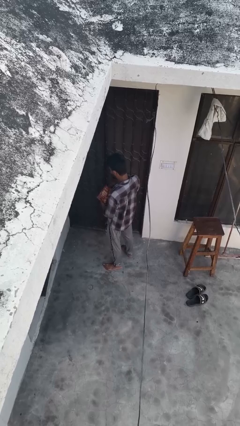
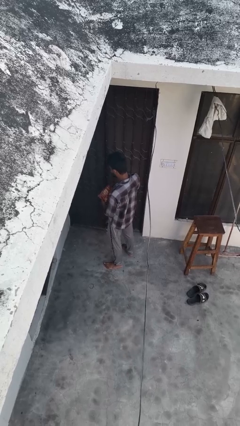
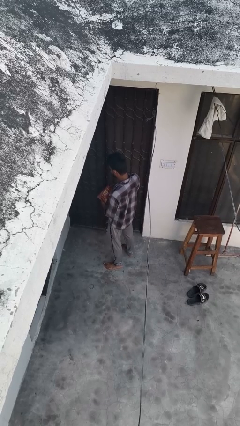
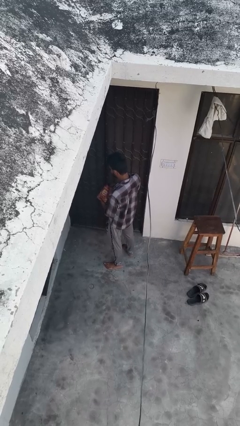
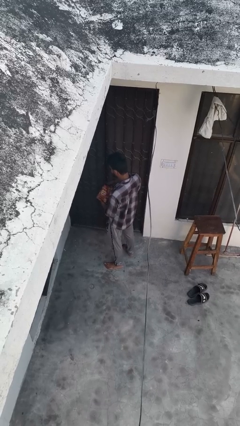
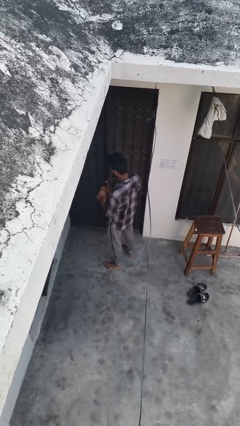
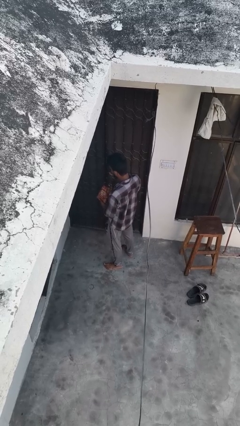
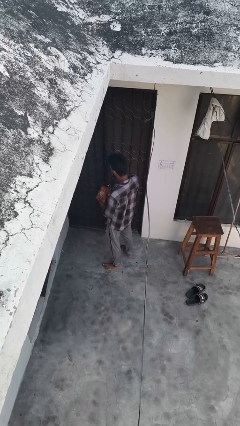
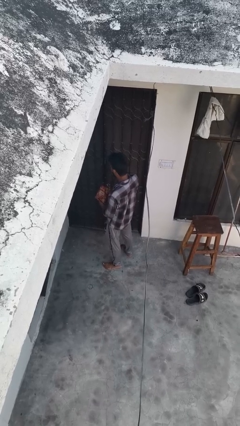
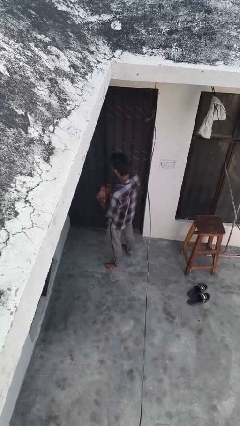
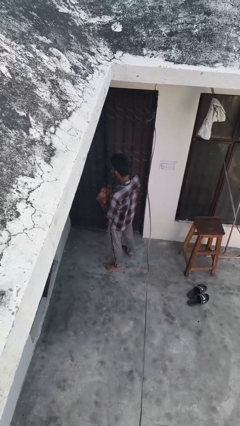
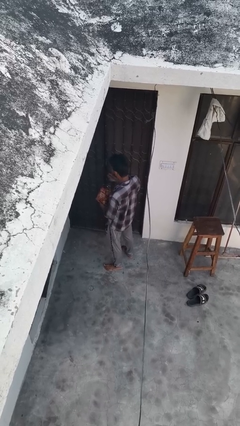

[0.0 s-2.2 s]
person eats snack from bag

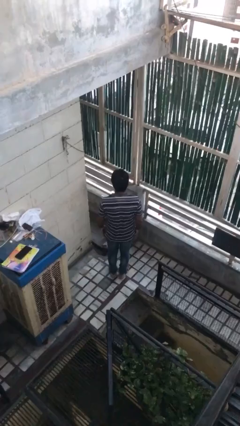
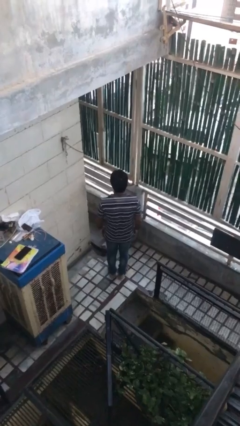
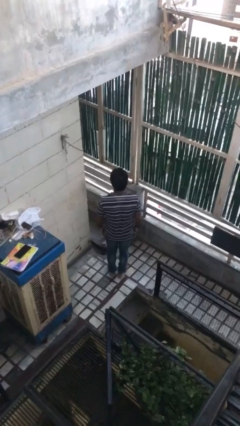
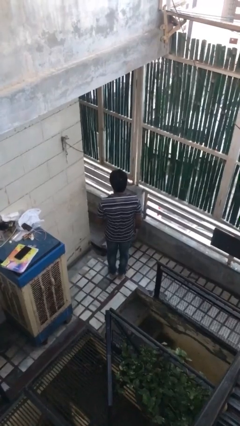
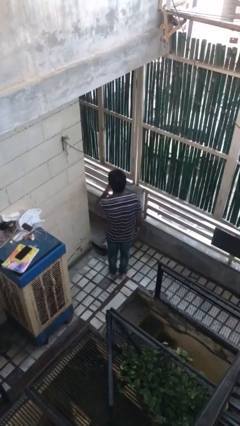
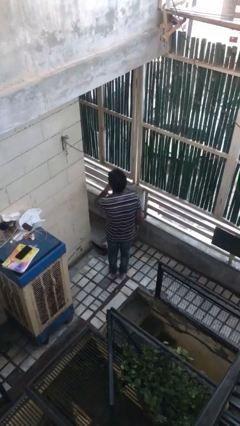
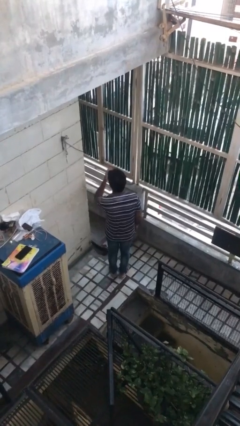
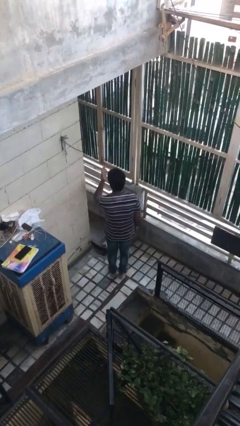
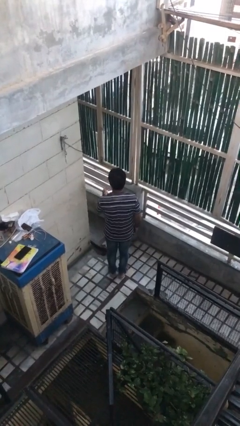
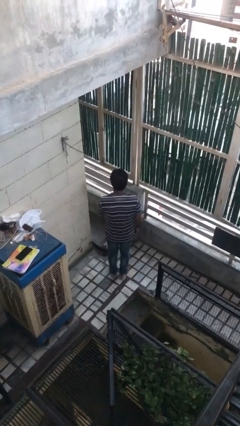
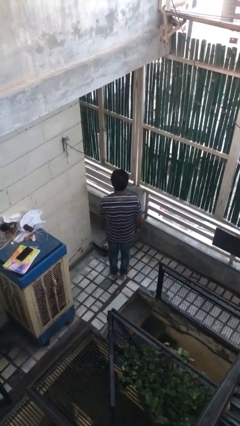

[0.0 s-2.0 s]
person gestures blow kiss

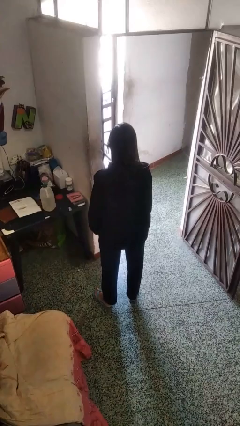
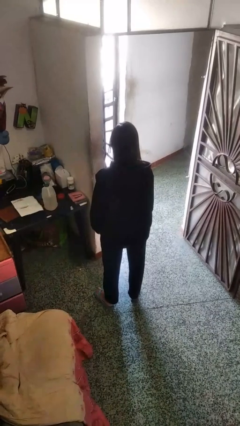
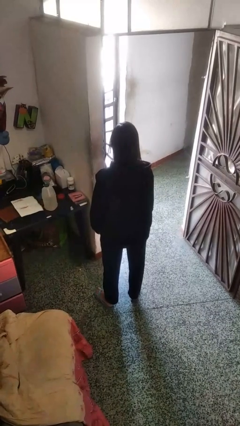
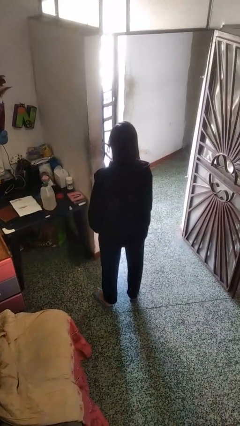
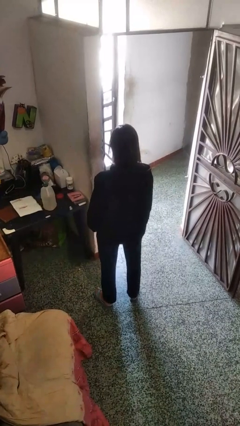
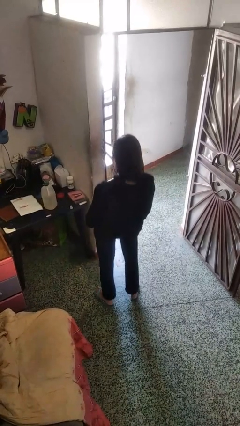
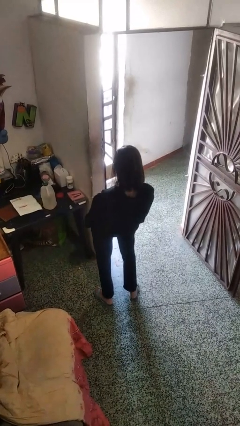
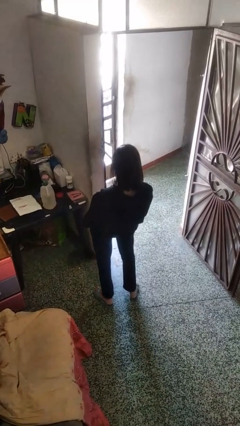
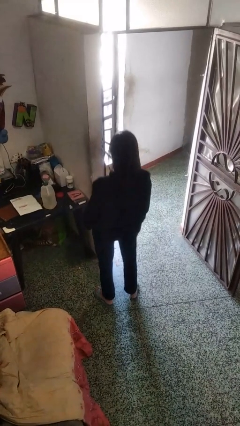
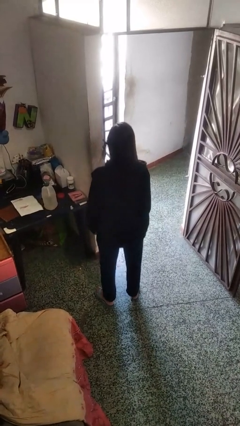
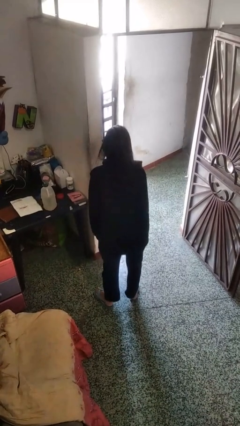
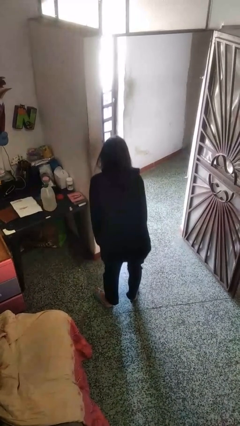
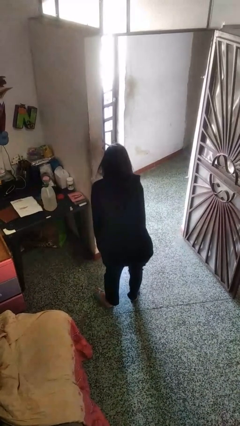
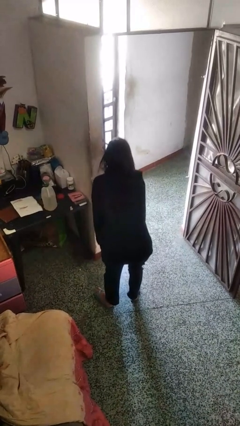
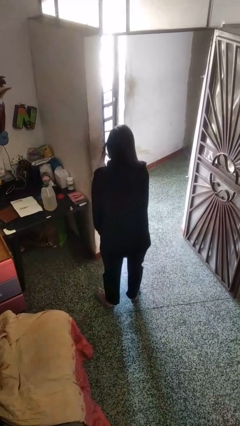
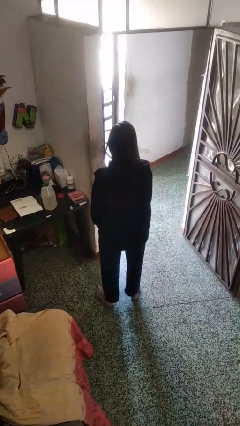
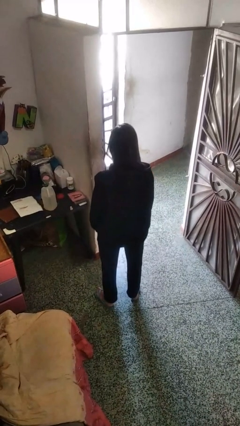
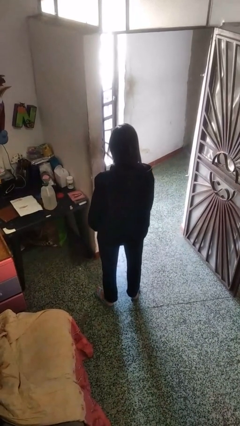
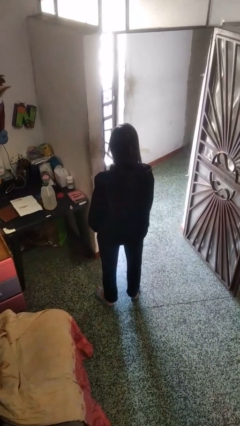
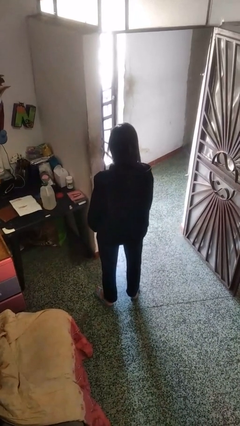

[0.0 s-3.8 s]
person wiggles hips

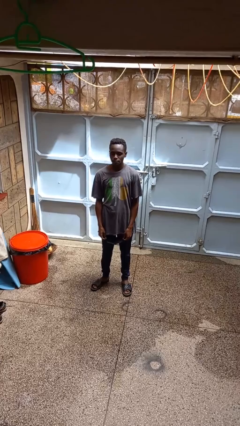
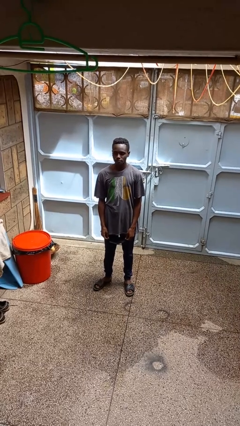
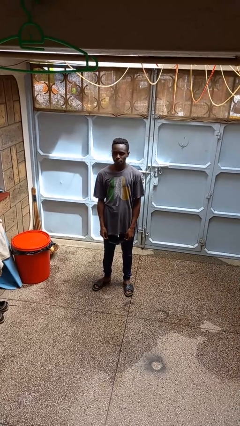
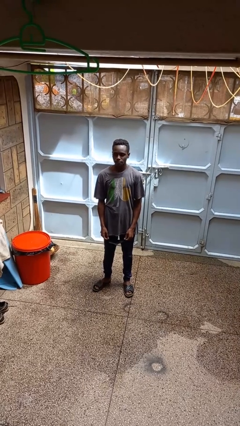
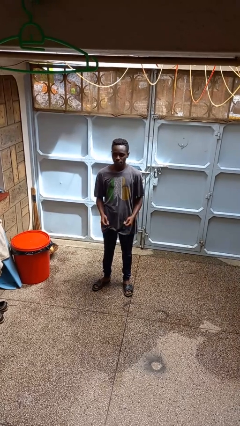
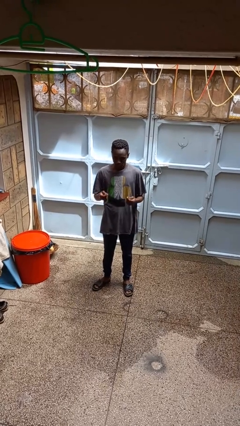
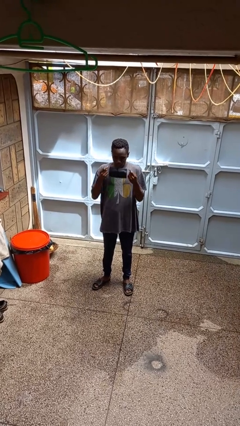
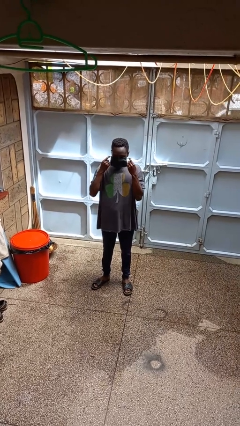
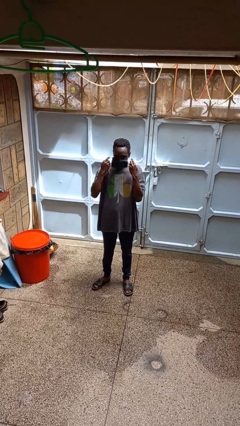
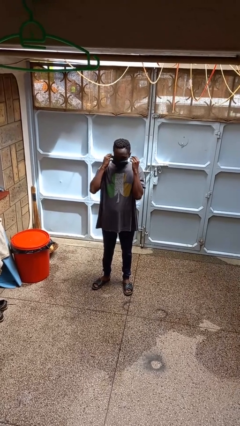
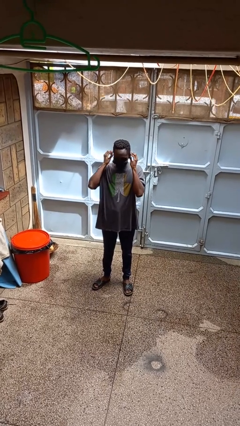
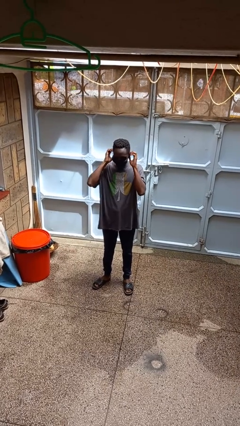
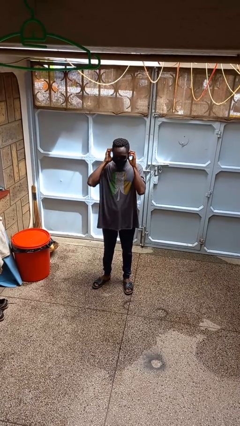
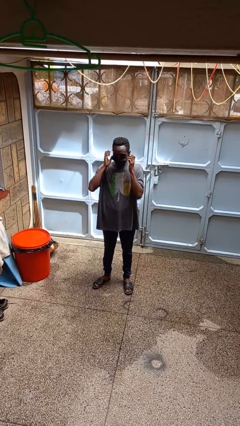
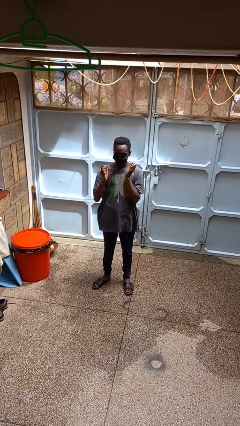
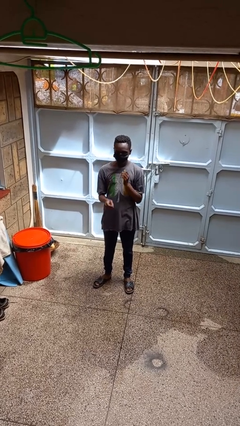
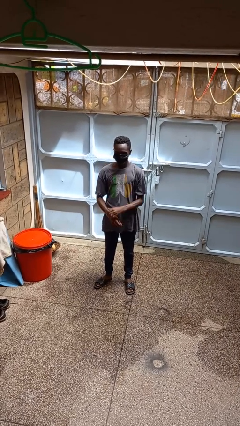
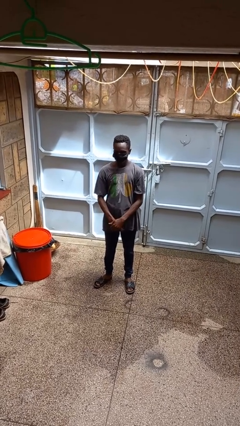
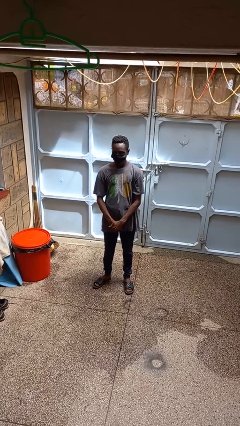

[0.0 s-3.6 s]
person puts on facemask

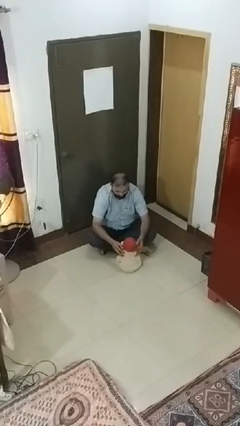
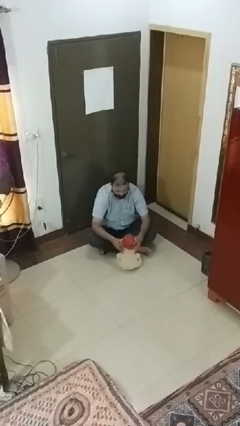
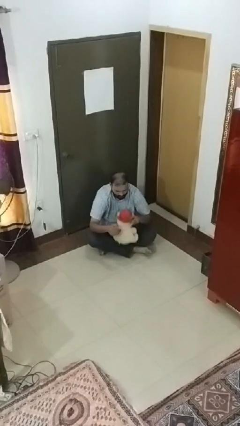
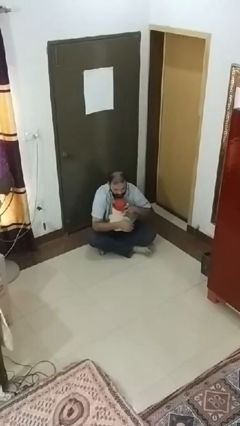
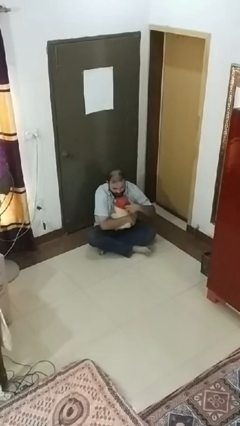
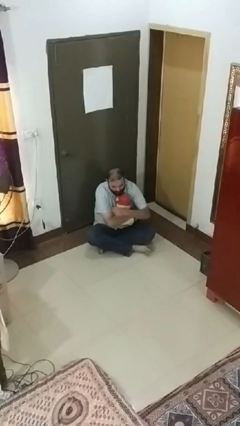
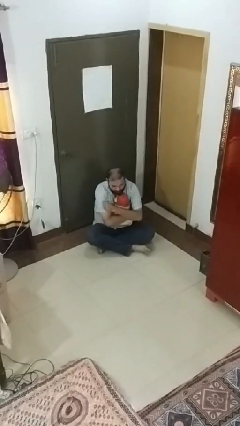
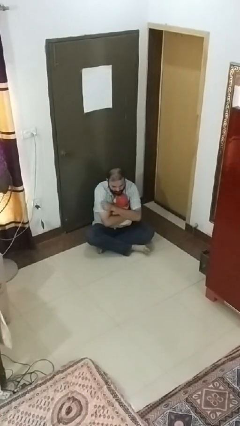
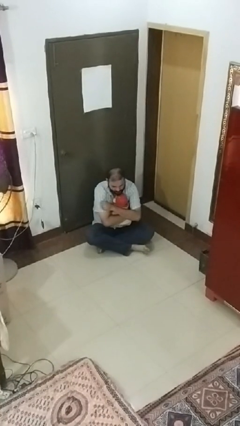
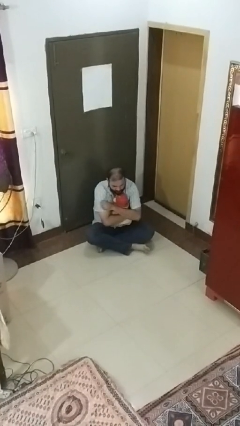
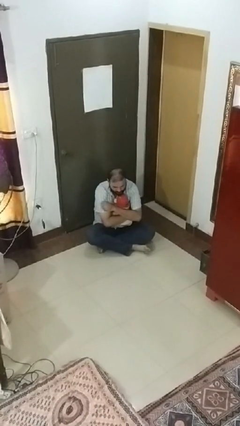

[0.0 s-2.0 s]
person hugs stuffed animal

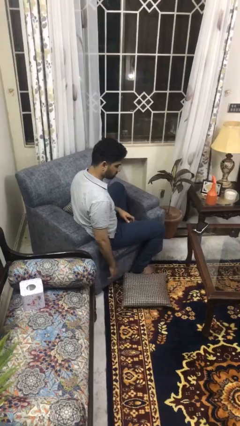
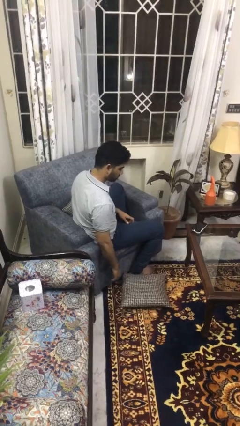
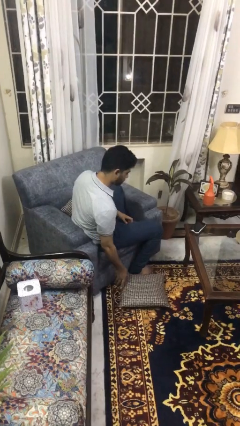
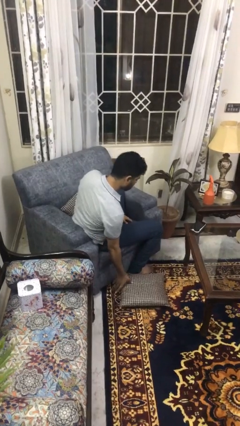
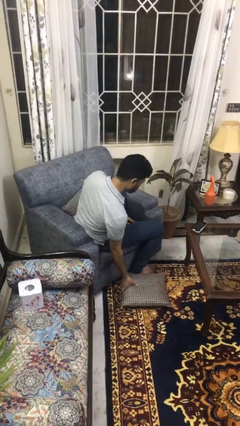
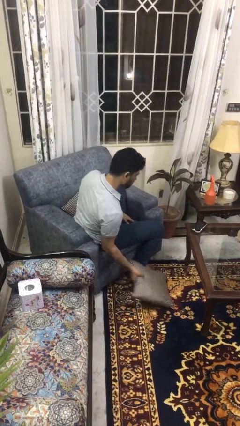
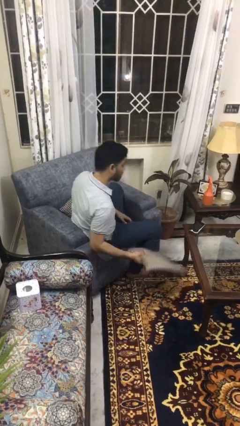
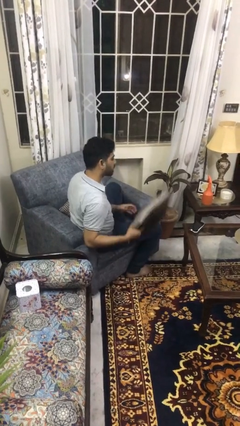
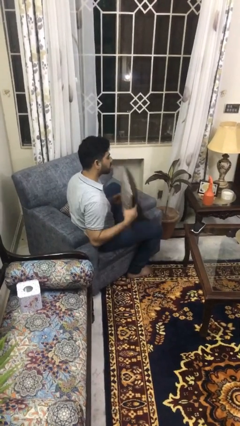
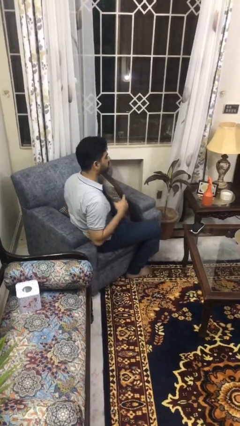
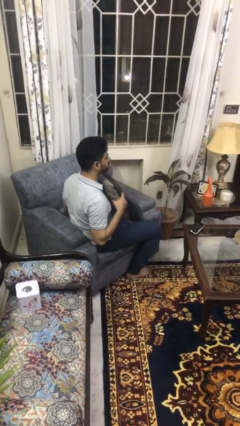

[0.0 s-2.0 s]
person picks up object from floor

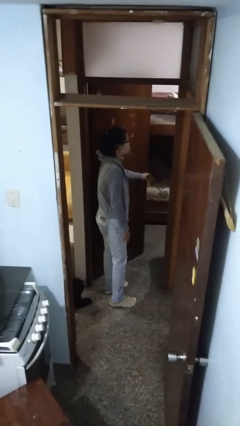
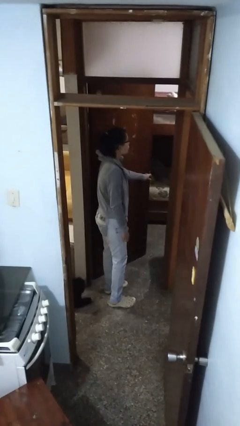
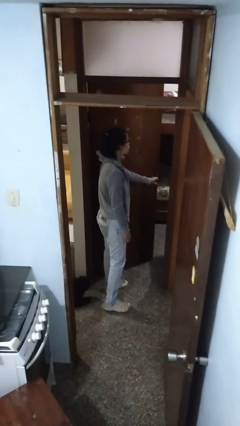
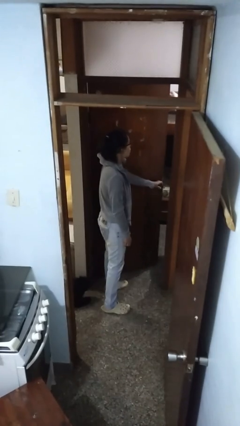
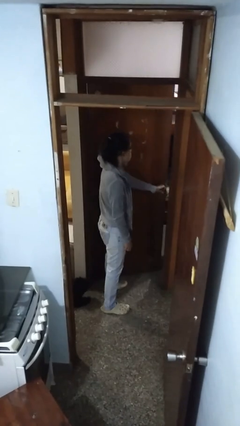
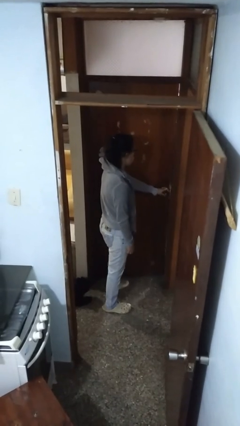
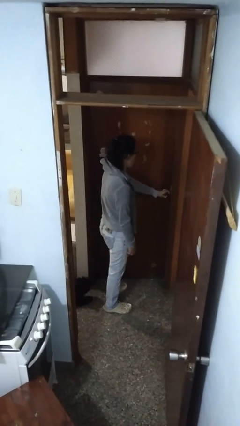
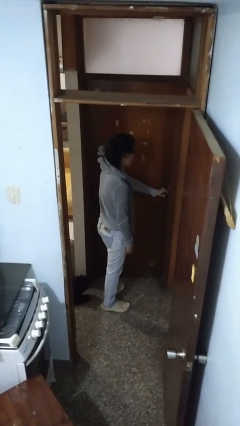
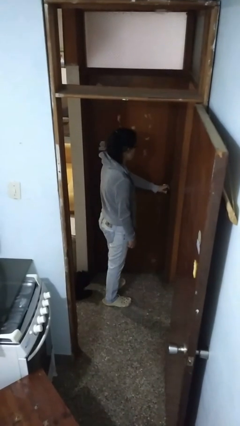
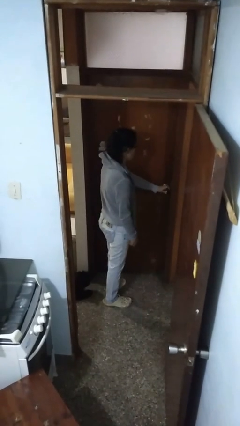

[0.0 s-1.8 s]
person closes facility door
